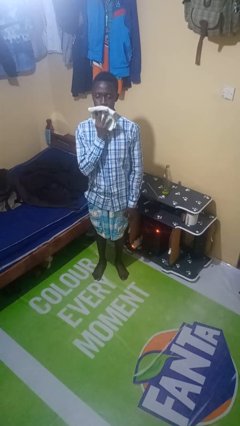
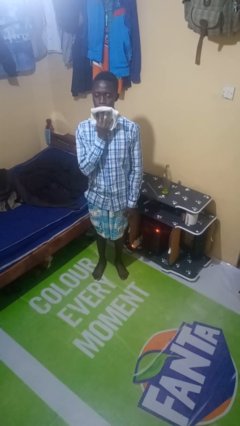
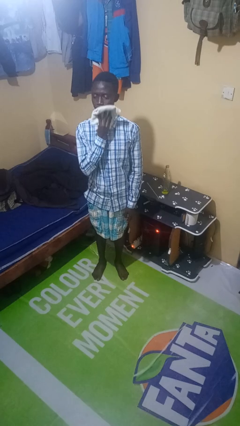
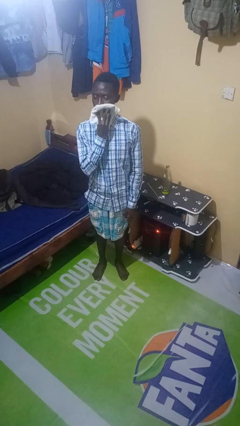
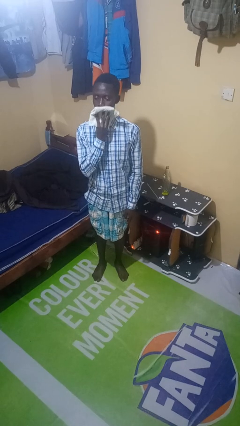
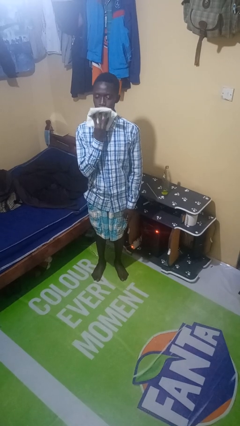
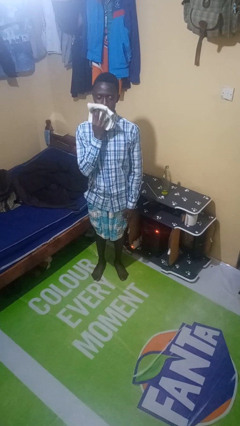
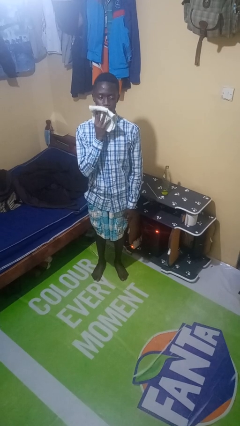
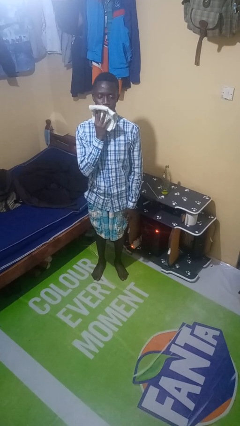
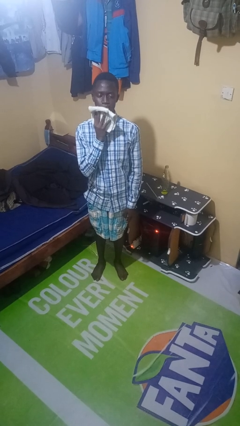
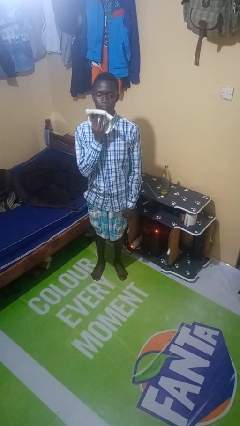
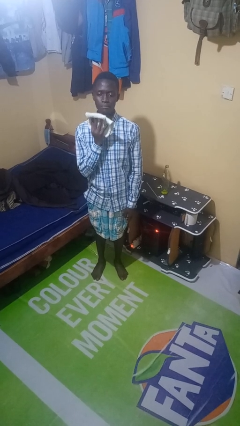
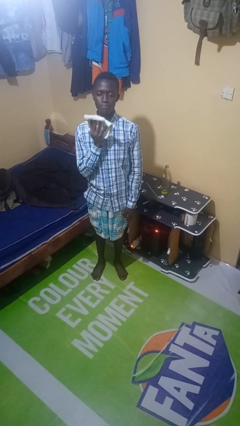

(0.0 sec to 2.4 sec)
person wipes mouth with napkin

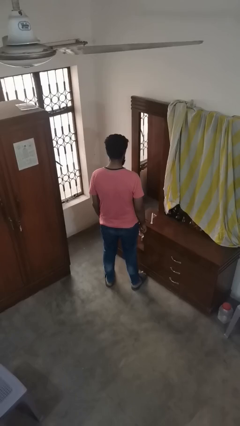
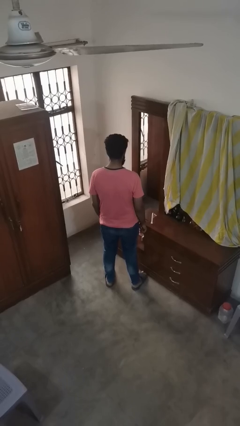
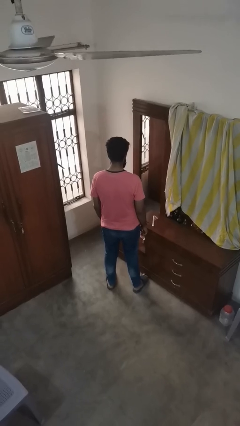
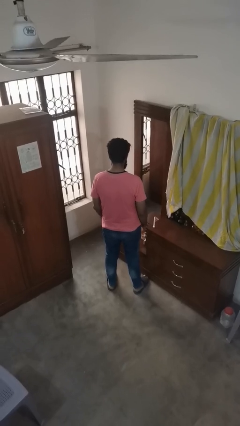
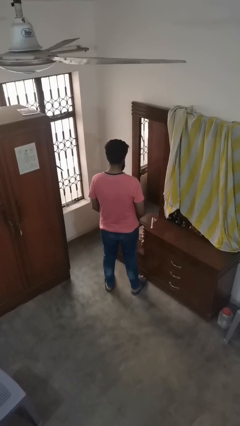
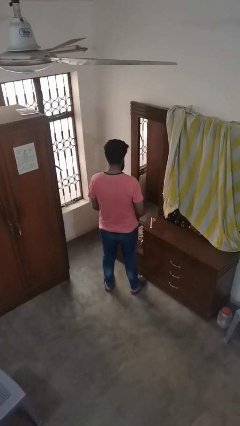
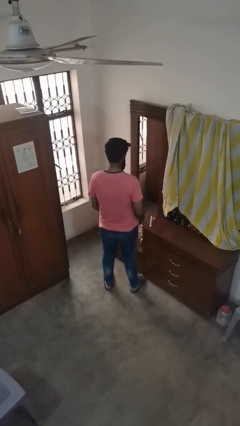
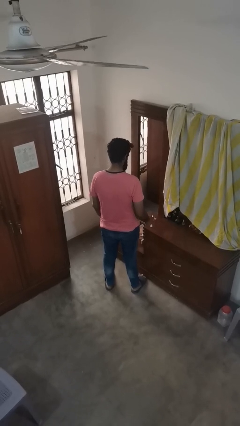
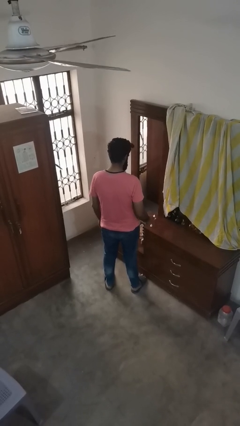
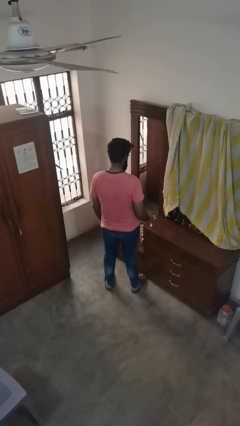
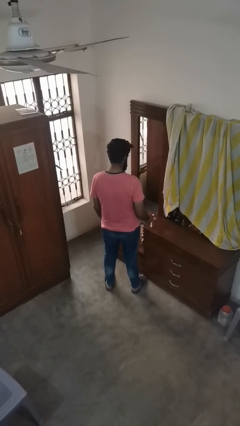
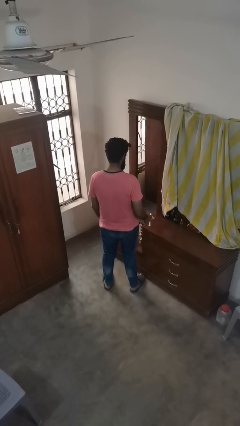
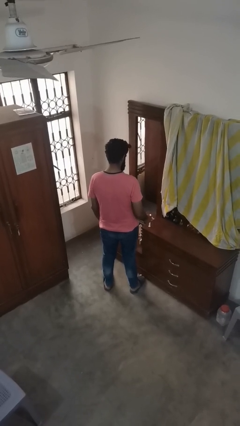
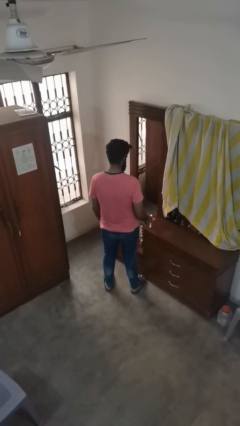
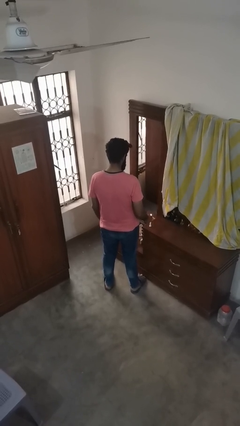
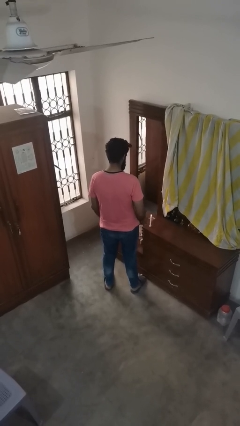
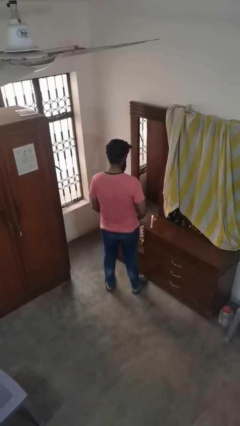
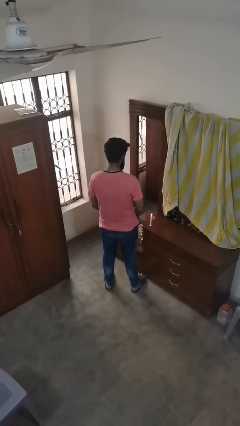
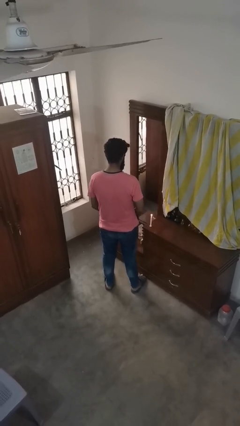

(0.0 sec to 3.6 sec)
person lights candle

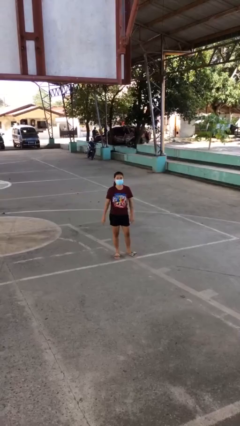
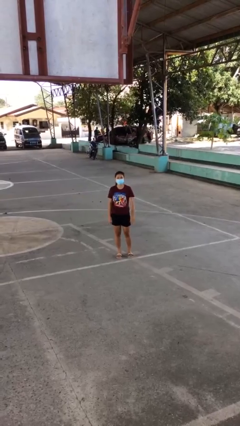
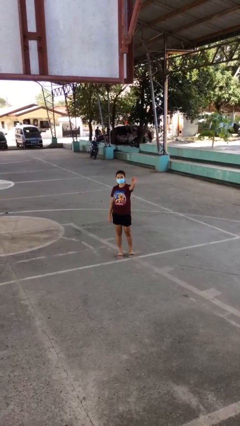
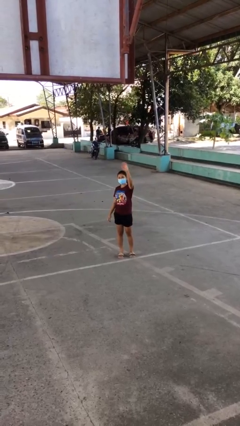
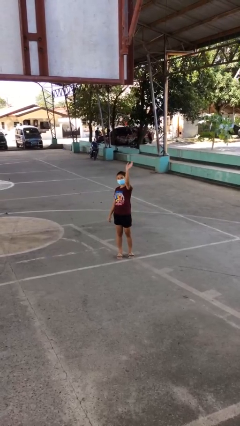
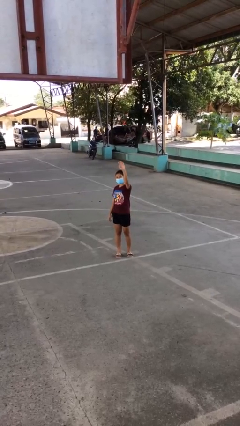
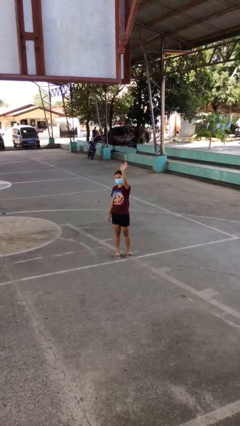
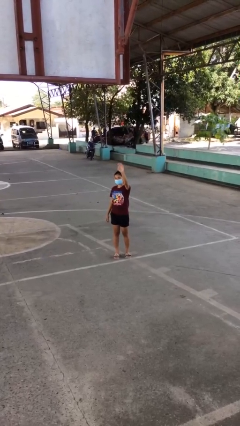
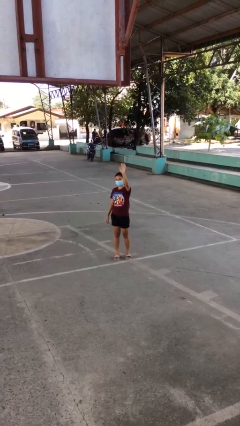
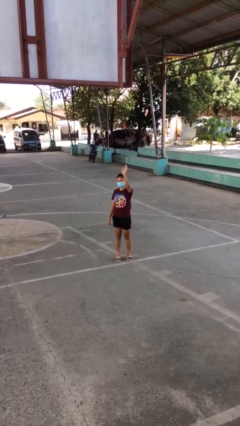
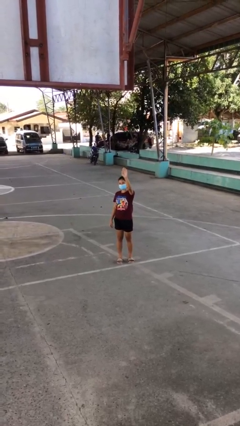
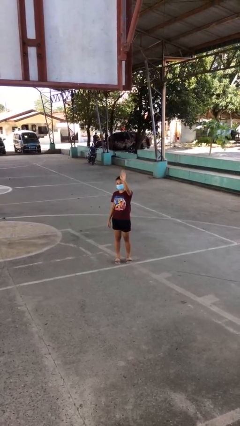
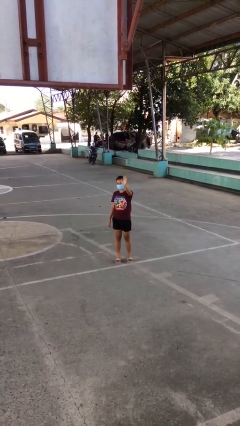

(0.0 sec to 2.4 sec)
person waves at person

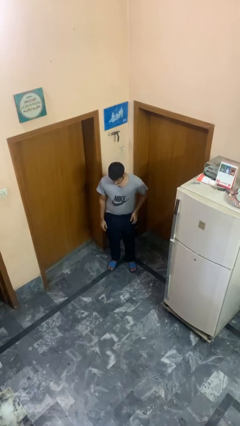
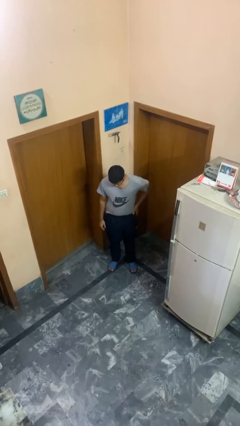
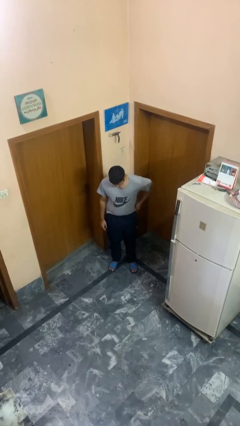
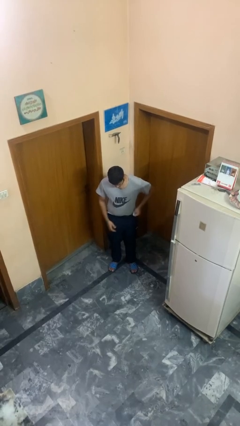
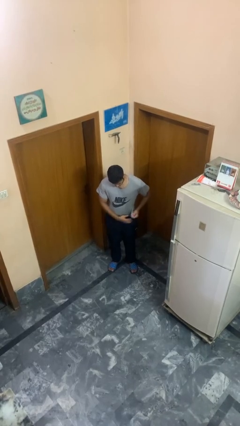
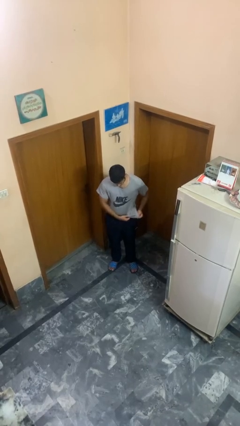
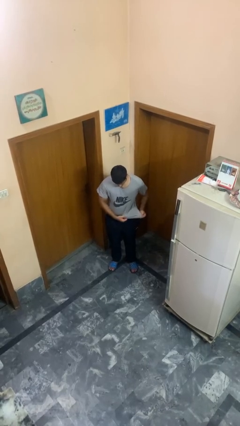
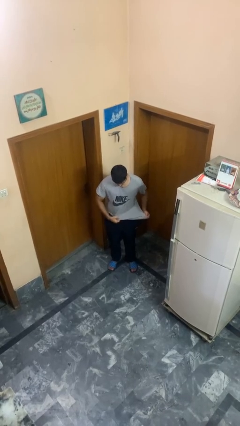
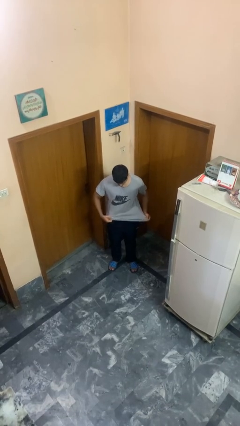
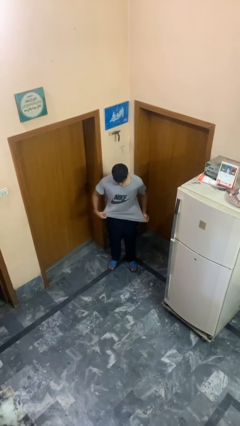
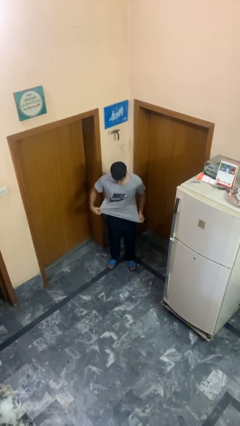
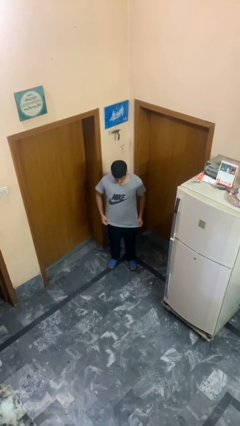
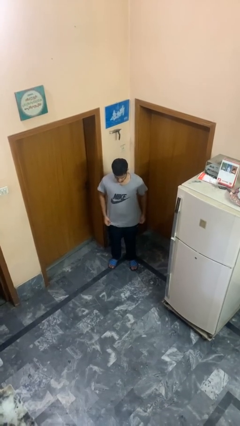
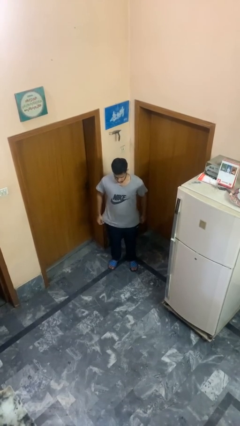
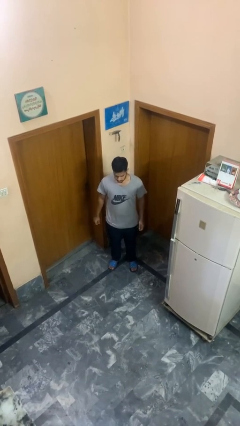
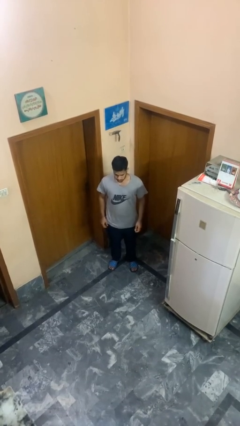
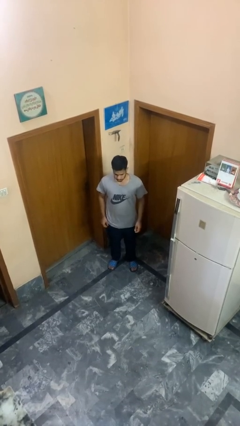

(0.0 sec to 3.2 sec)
person untucks shirt

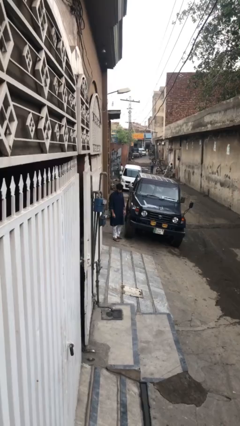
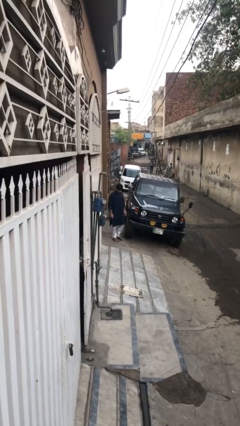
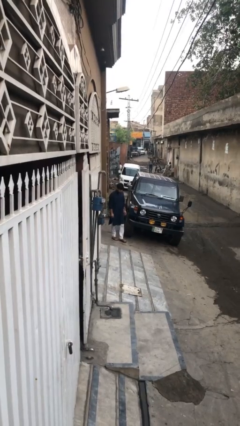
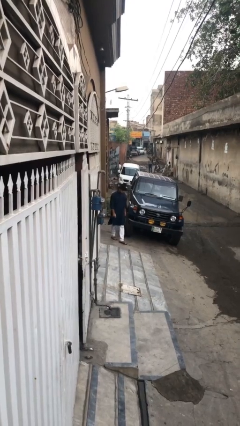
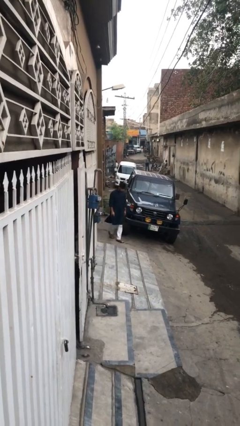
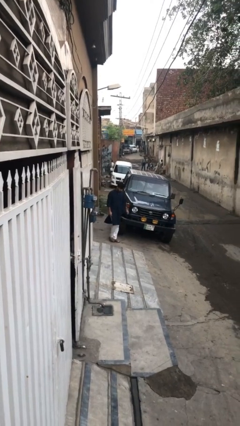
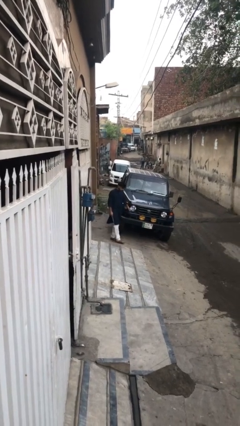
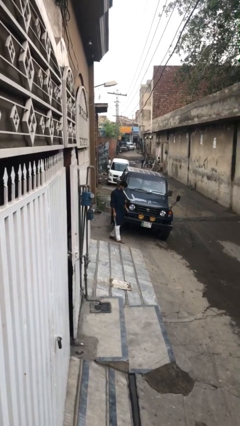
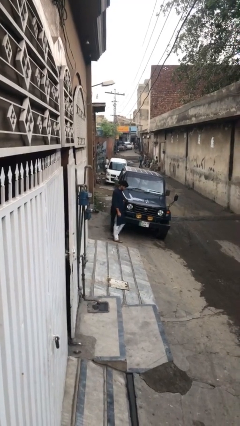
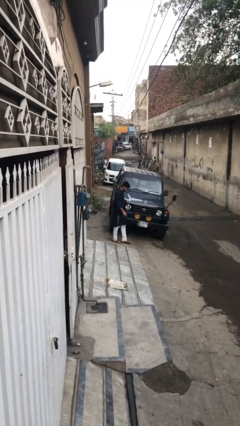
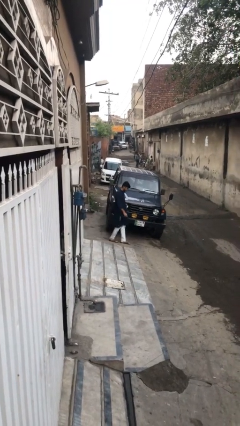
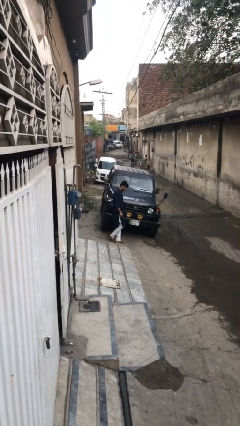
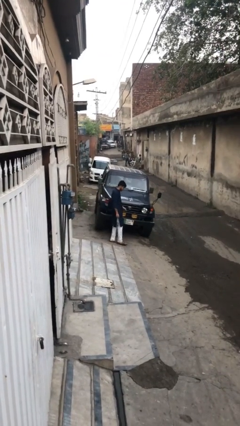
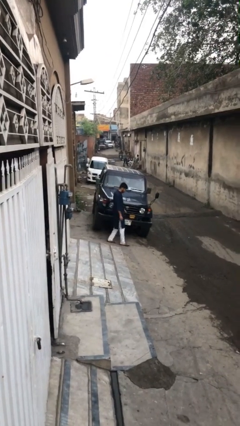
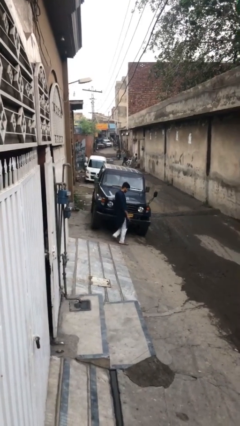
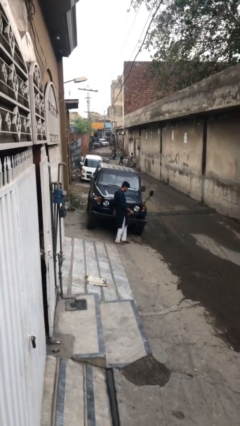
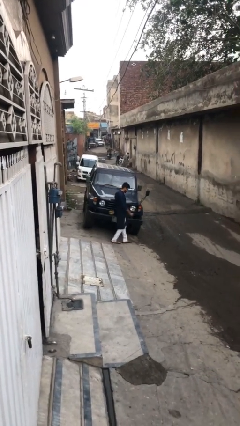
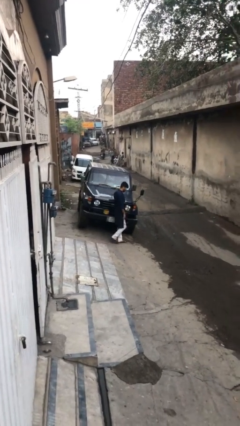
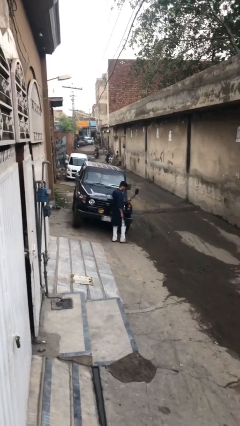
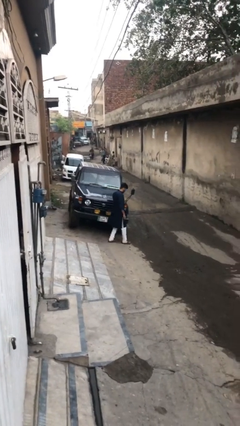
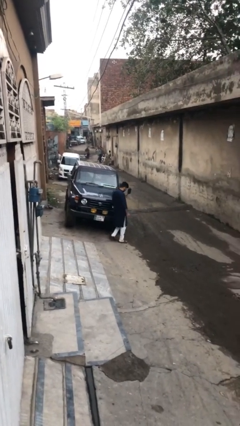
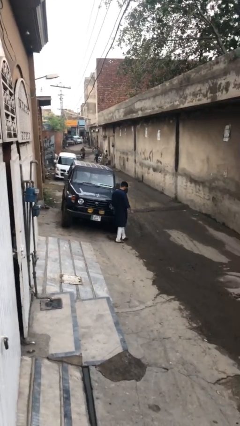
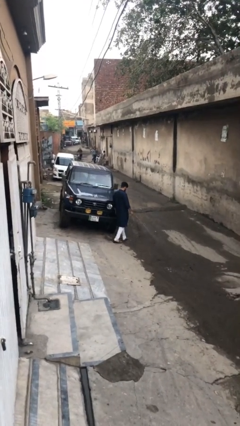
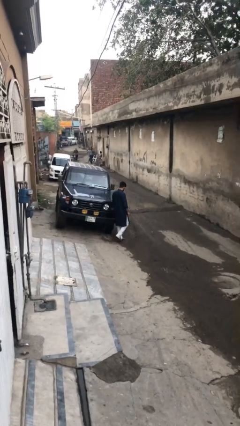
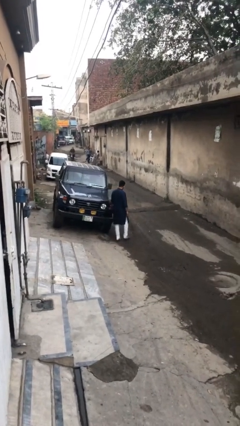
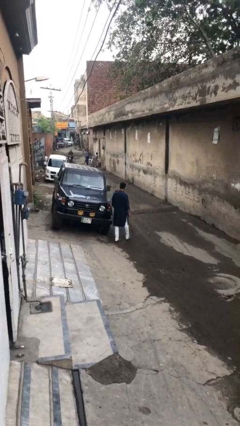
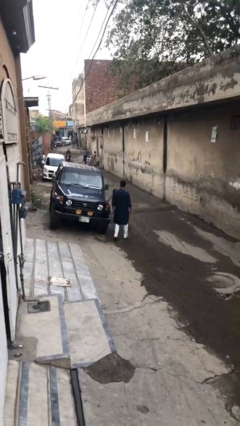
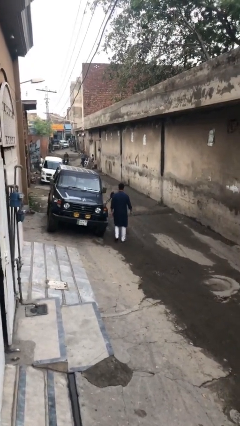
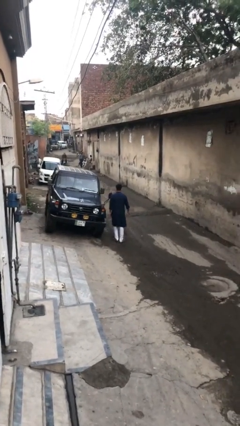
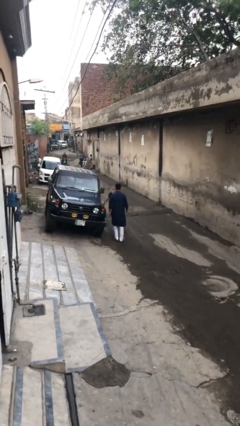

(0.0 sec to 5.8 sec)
person walks around car

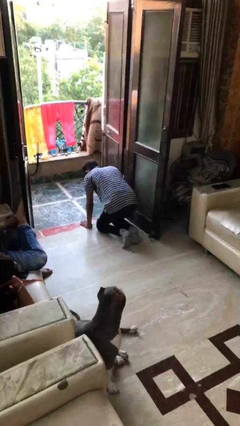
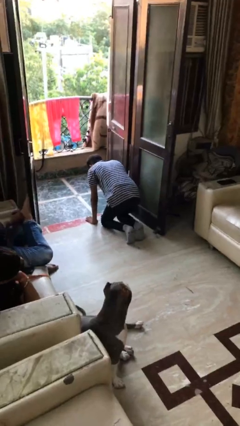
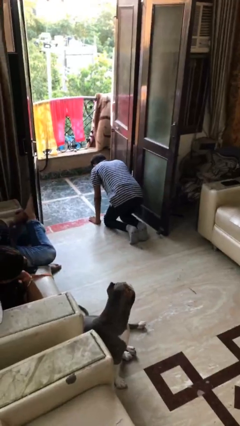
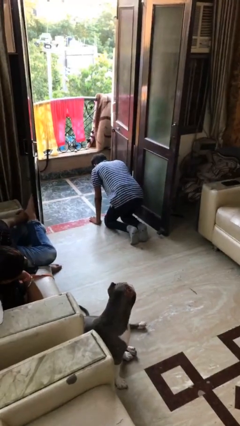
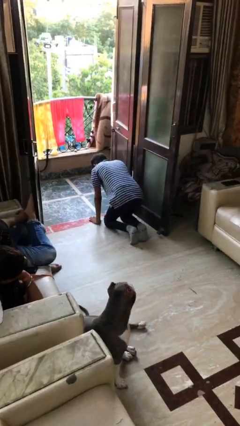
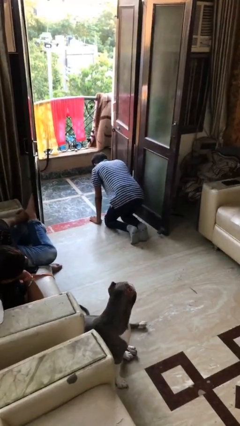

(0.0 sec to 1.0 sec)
person trips on object on floor
